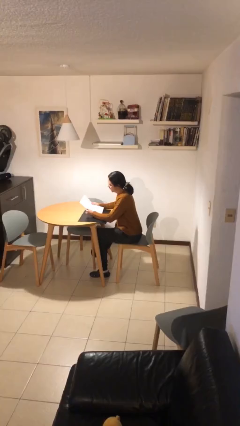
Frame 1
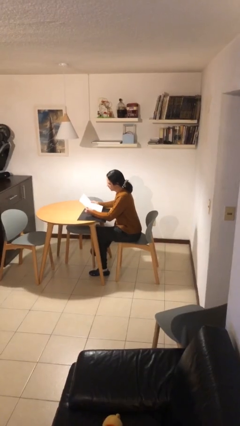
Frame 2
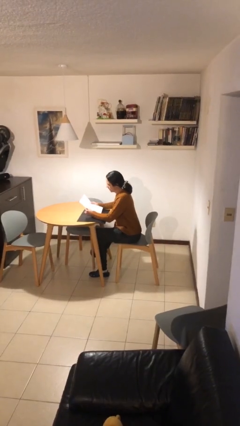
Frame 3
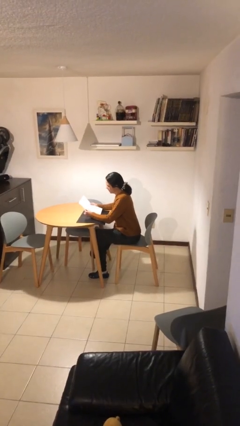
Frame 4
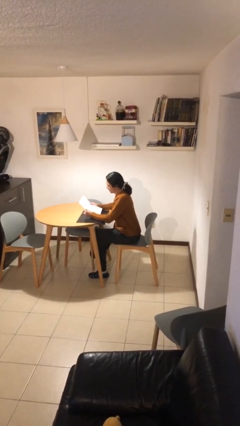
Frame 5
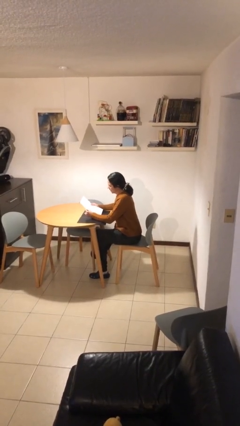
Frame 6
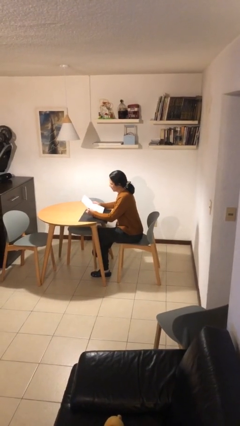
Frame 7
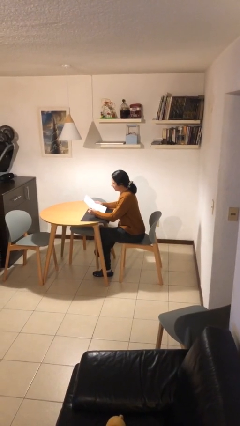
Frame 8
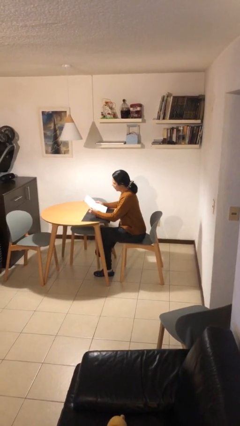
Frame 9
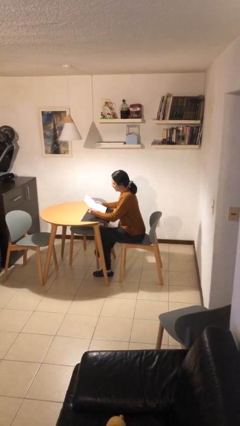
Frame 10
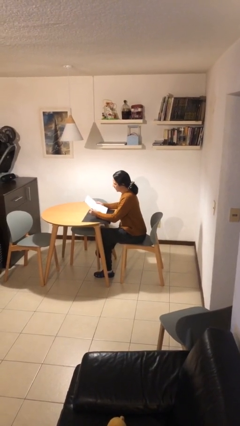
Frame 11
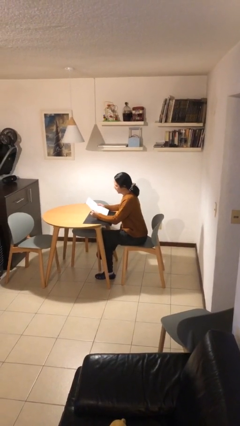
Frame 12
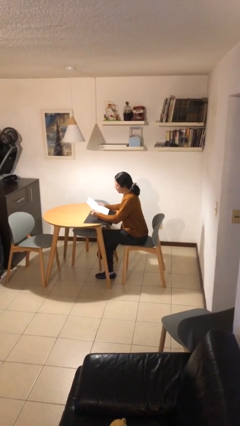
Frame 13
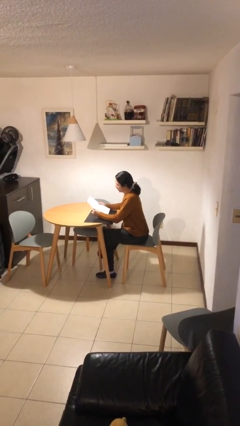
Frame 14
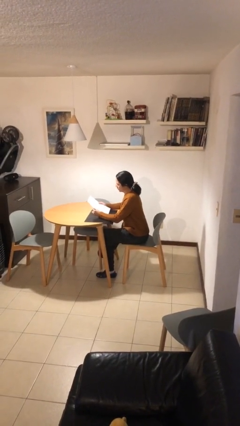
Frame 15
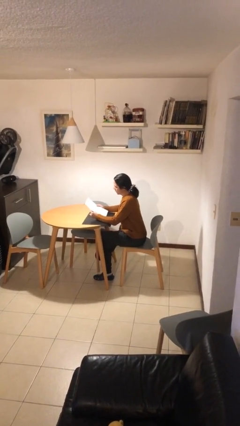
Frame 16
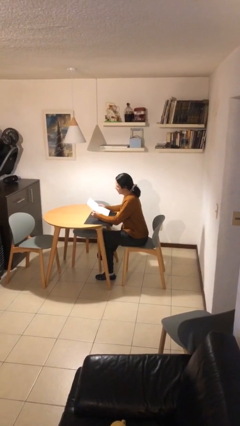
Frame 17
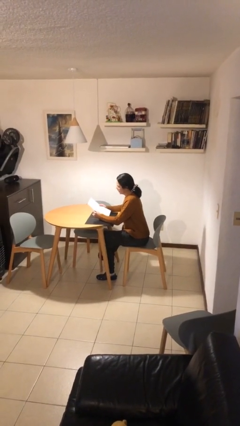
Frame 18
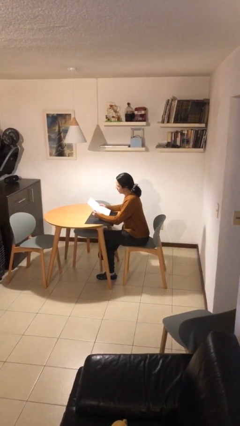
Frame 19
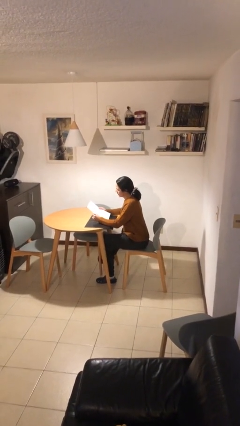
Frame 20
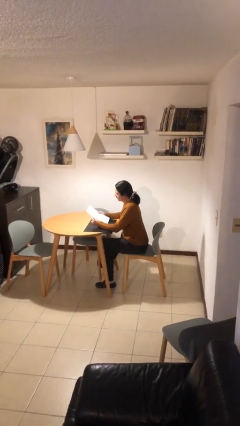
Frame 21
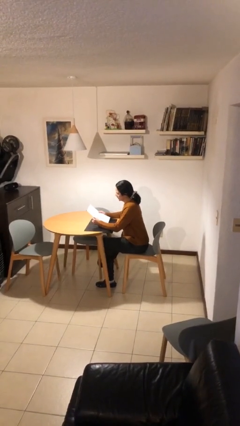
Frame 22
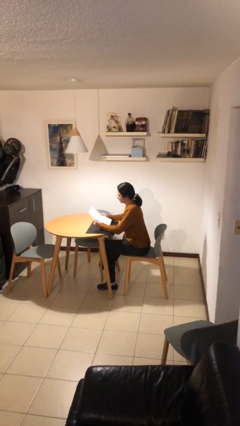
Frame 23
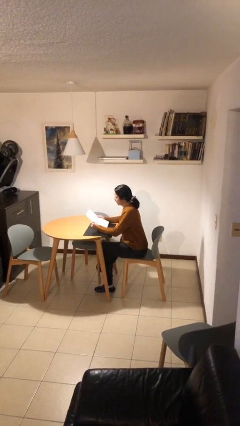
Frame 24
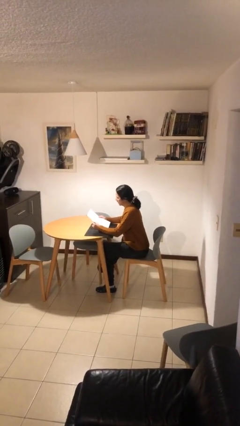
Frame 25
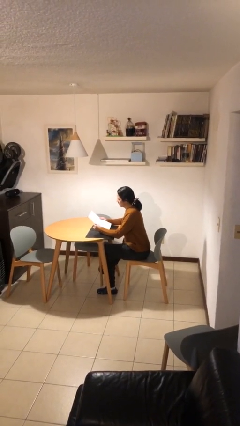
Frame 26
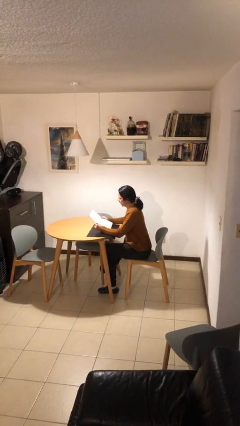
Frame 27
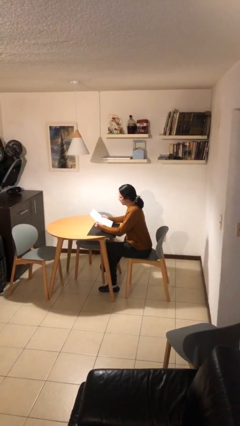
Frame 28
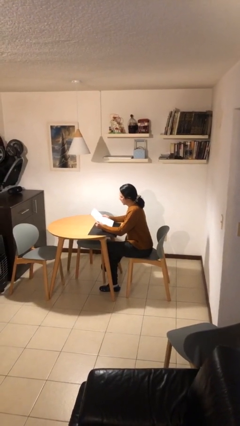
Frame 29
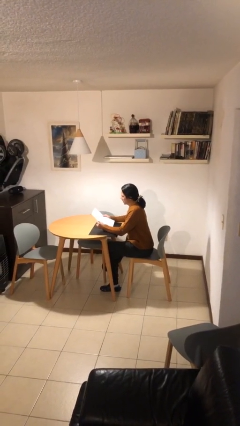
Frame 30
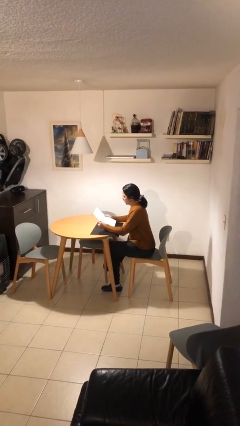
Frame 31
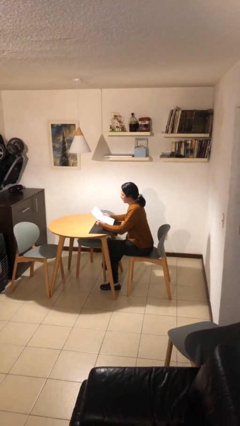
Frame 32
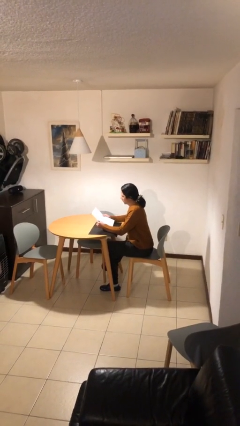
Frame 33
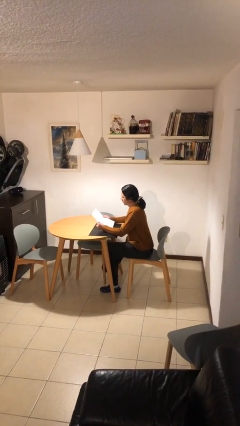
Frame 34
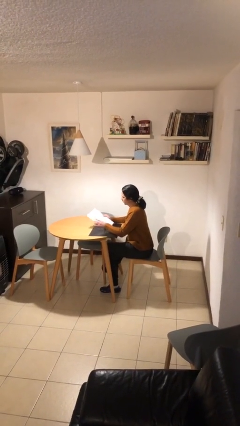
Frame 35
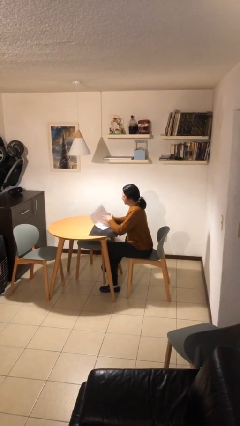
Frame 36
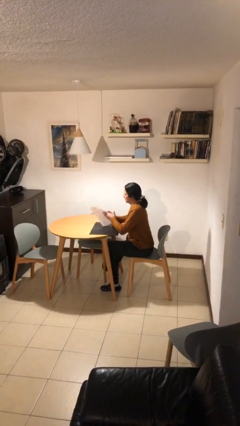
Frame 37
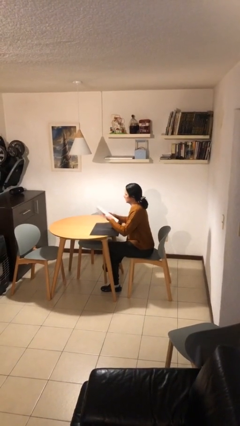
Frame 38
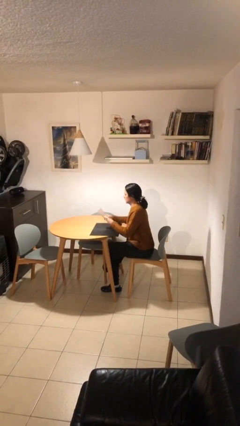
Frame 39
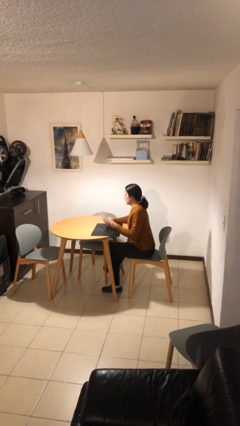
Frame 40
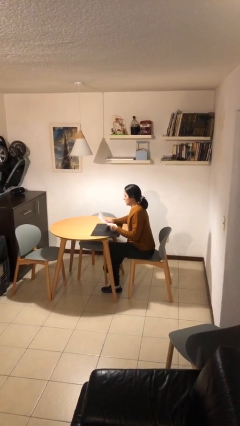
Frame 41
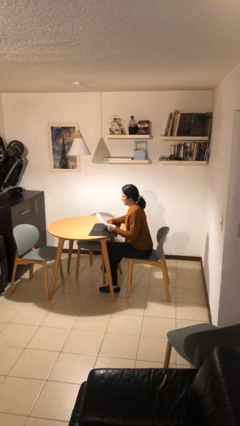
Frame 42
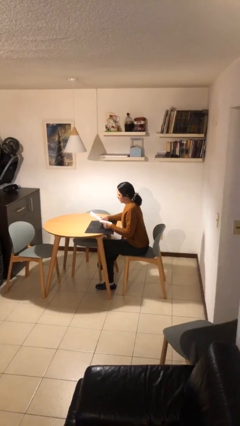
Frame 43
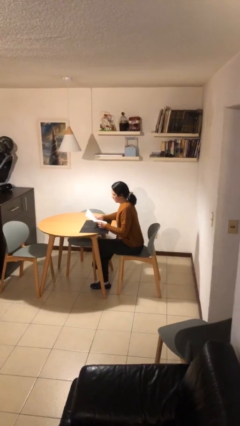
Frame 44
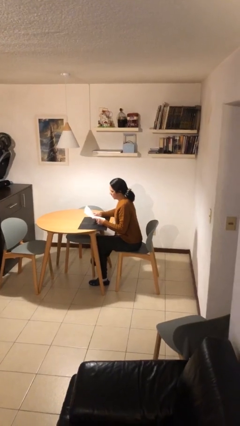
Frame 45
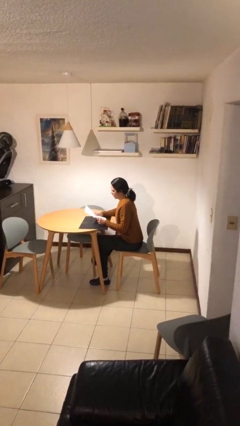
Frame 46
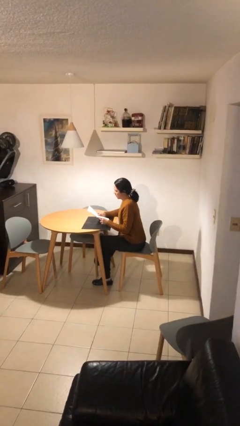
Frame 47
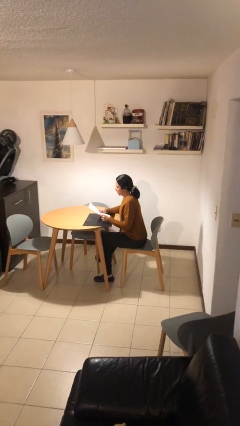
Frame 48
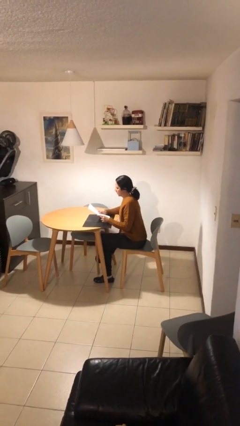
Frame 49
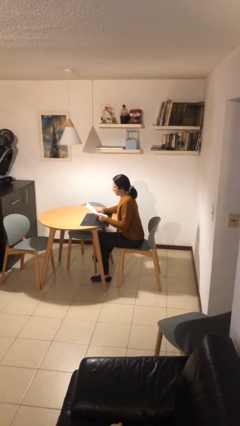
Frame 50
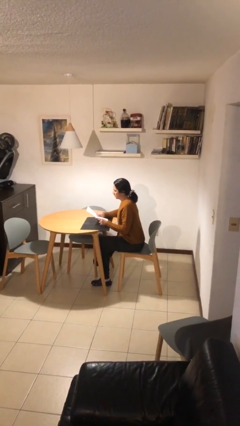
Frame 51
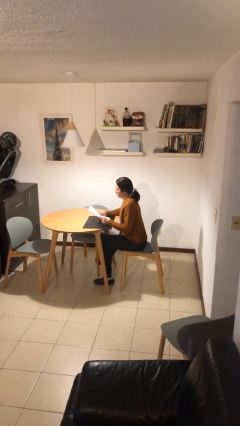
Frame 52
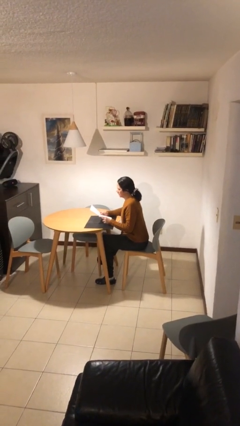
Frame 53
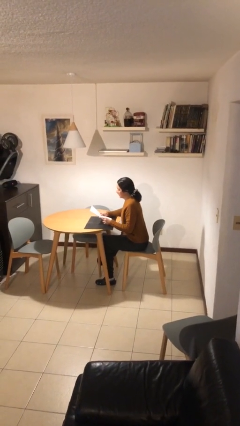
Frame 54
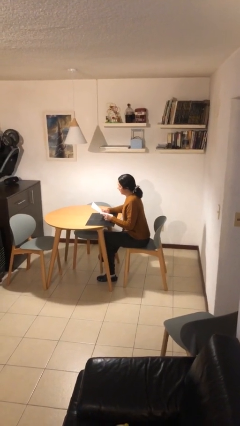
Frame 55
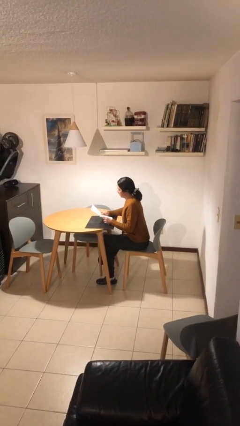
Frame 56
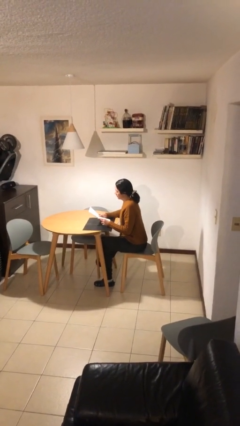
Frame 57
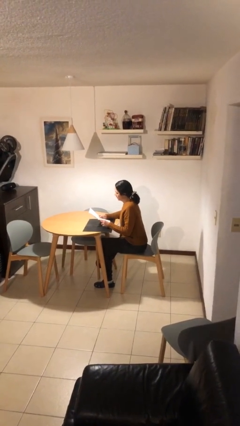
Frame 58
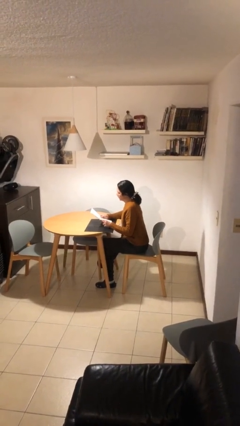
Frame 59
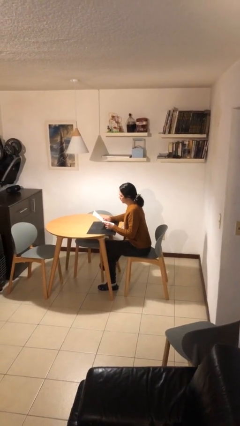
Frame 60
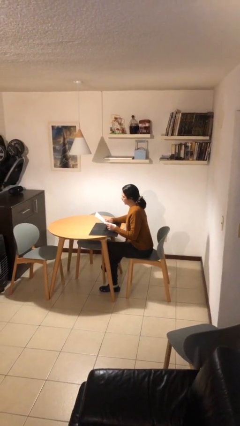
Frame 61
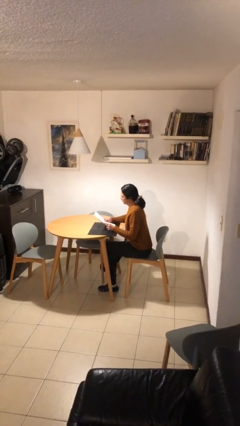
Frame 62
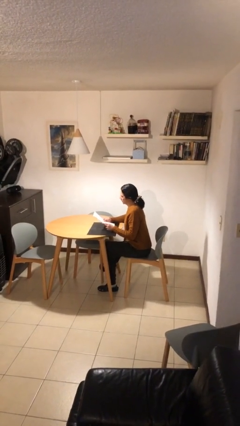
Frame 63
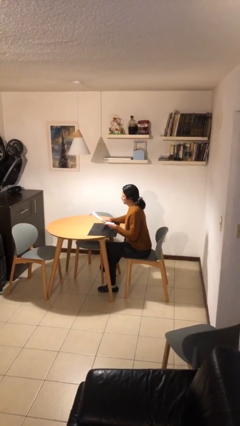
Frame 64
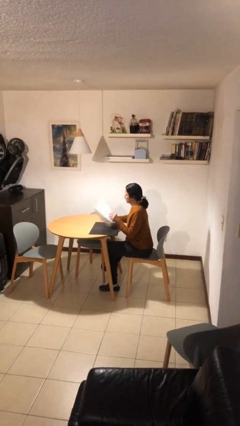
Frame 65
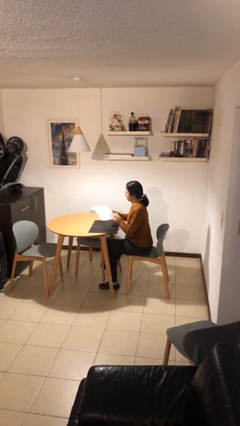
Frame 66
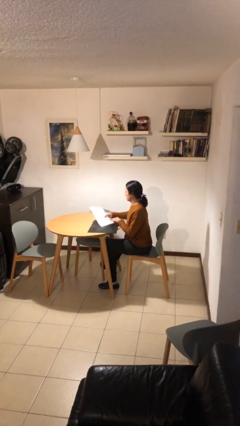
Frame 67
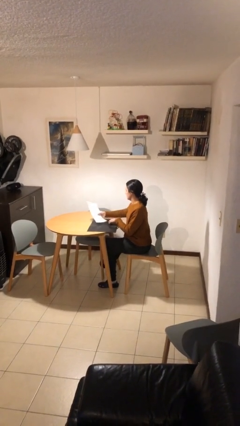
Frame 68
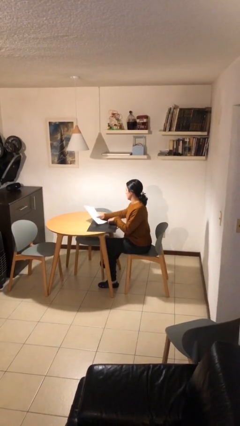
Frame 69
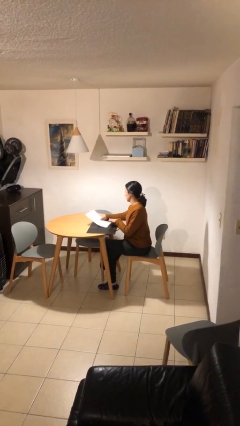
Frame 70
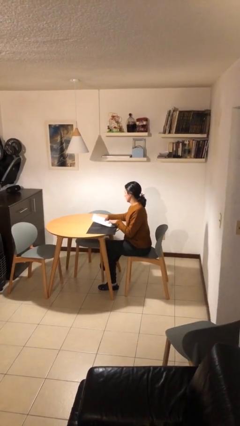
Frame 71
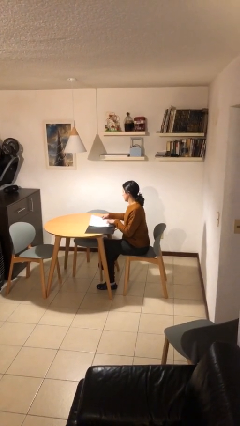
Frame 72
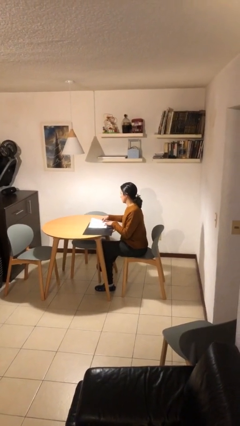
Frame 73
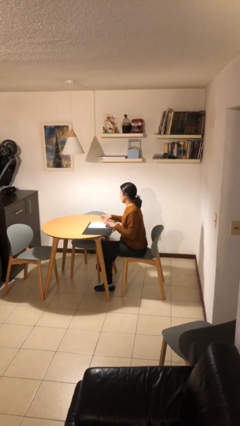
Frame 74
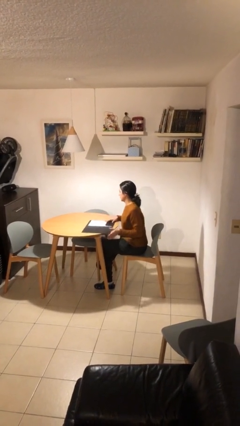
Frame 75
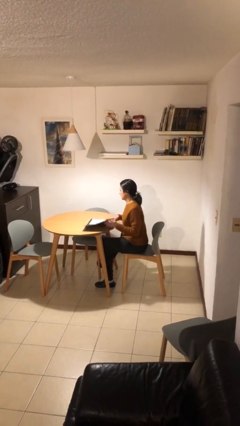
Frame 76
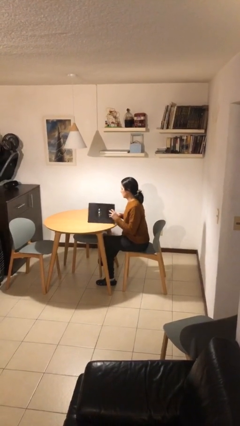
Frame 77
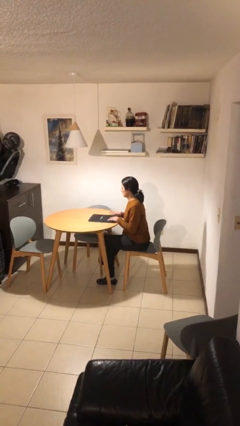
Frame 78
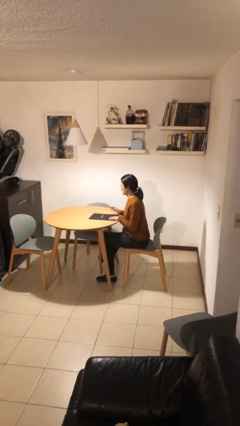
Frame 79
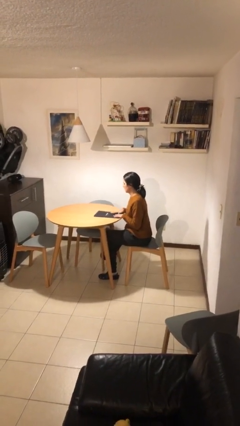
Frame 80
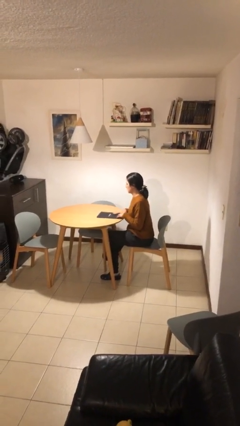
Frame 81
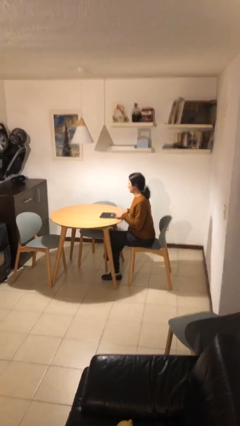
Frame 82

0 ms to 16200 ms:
person reads document

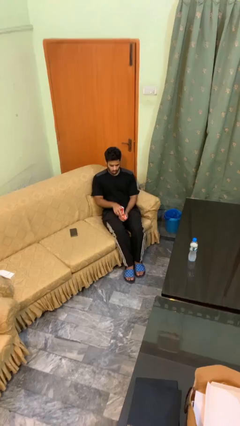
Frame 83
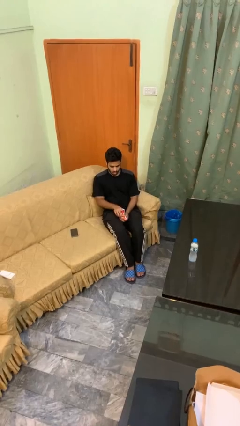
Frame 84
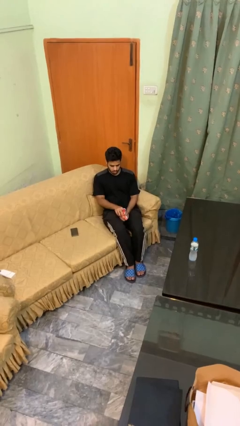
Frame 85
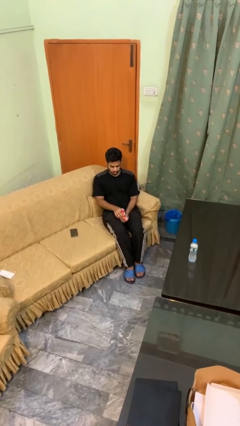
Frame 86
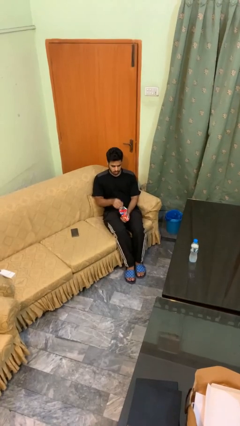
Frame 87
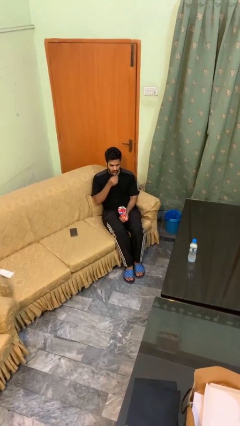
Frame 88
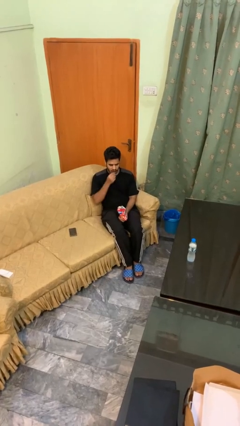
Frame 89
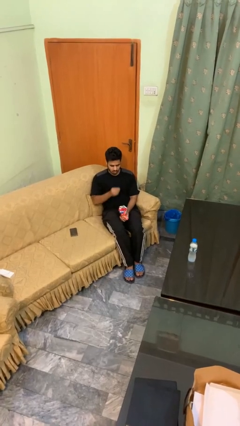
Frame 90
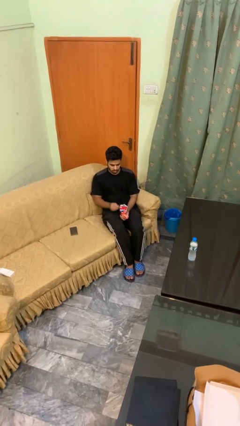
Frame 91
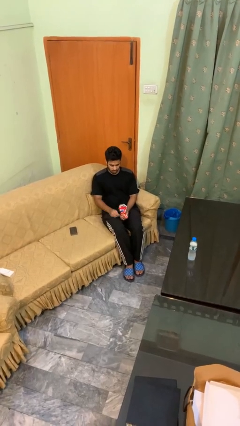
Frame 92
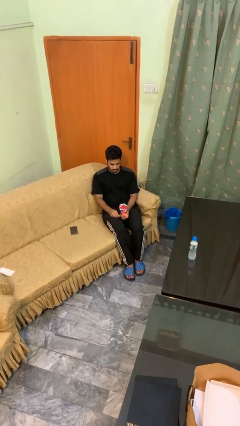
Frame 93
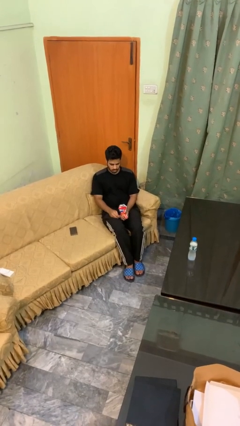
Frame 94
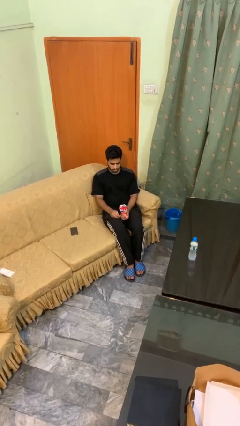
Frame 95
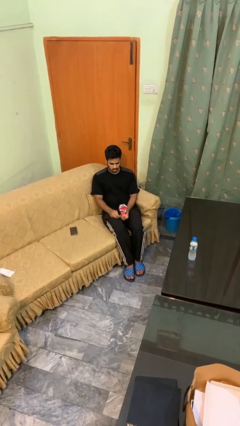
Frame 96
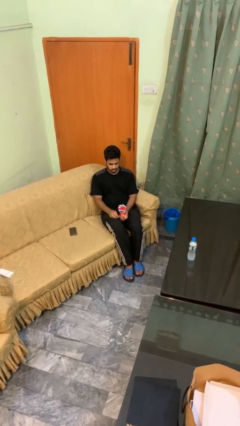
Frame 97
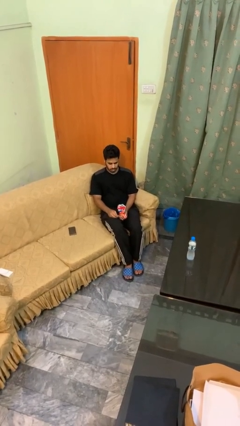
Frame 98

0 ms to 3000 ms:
person eats snack from bag
